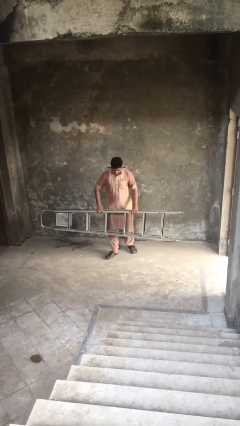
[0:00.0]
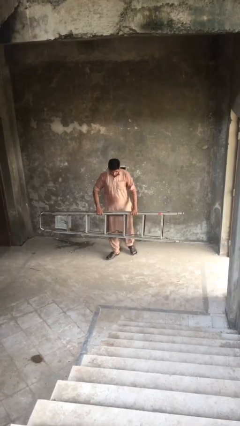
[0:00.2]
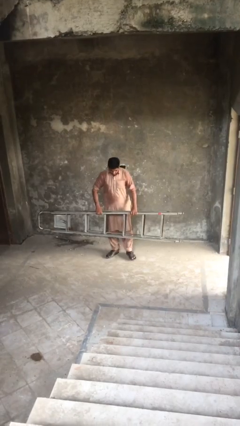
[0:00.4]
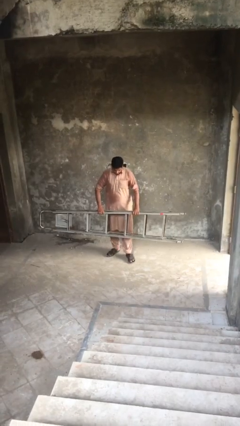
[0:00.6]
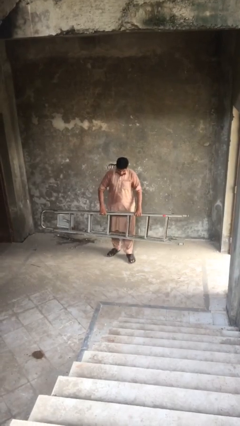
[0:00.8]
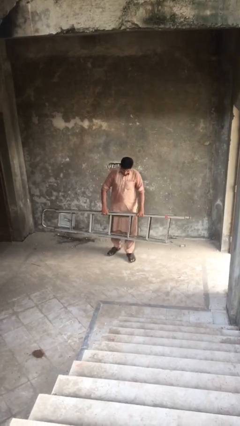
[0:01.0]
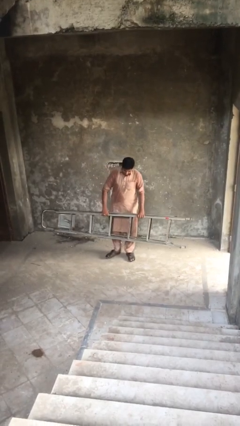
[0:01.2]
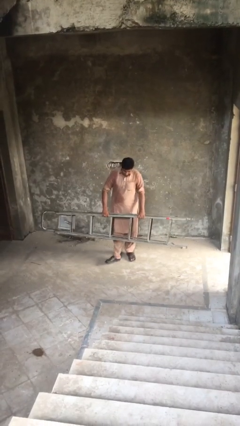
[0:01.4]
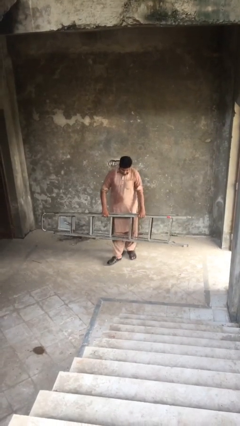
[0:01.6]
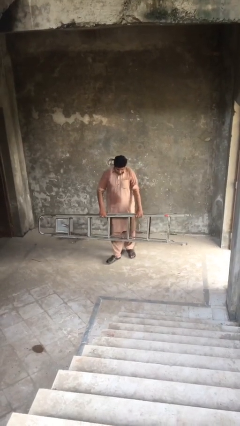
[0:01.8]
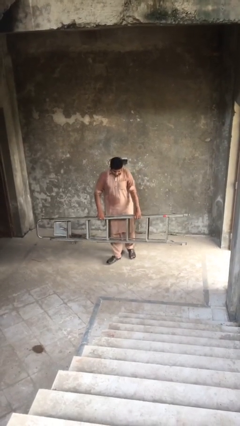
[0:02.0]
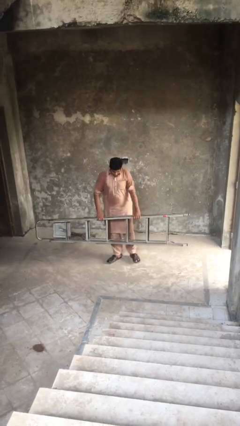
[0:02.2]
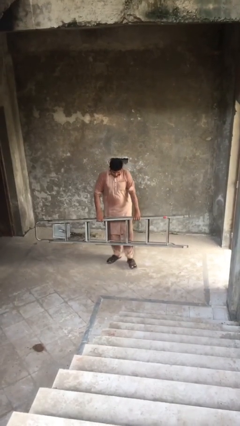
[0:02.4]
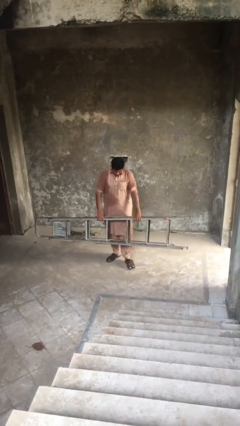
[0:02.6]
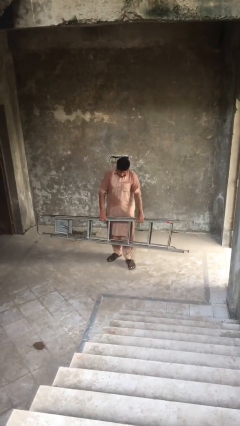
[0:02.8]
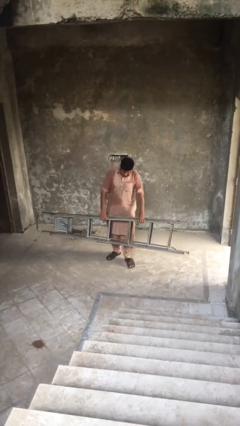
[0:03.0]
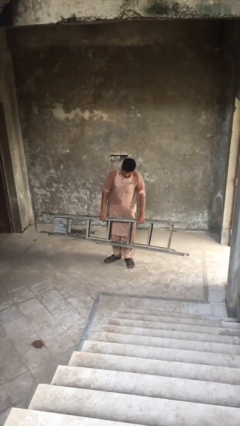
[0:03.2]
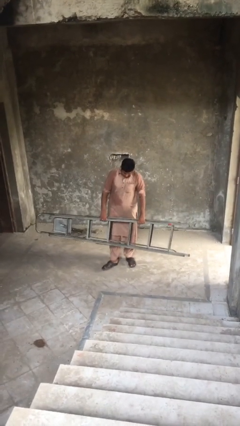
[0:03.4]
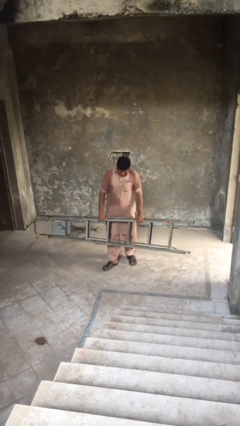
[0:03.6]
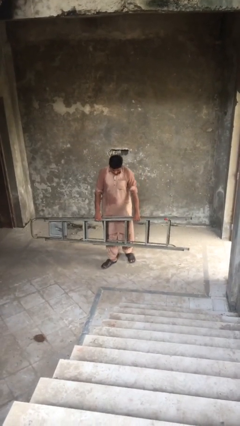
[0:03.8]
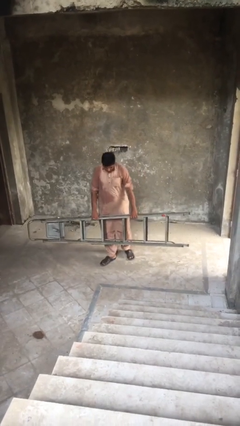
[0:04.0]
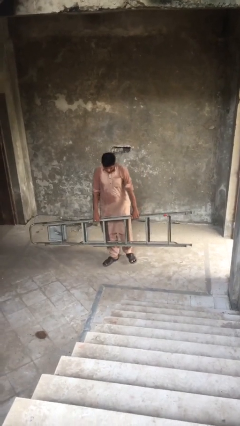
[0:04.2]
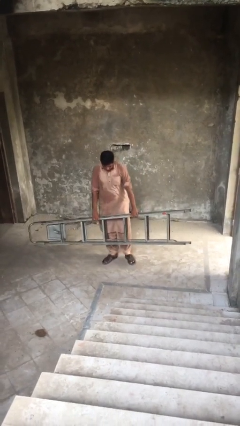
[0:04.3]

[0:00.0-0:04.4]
person carries heavy object

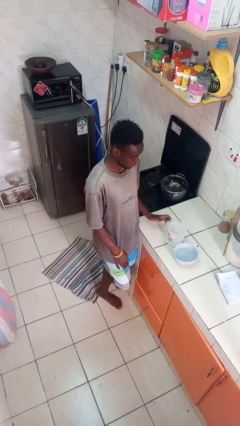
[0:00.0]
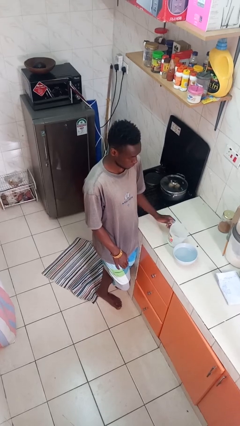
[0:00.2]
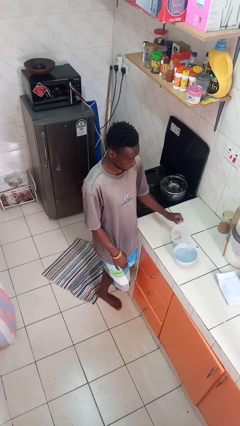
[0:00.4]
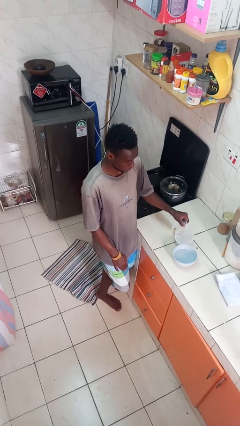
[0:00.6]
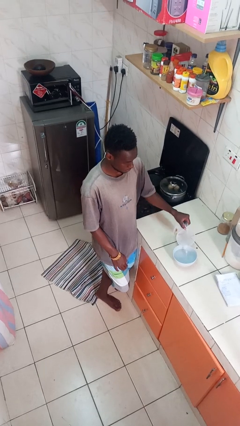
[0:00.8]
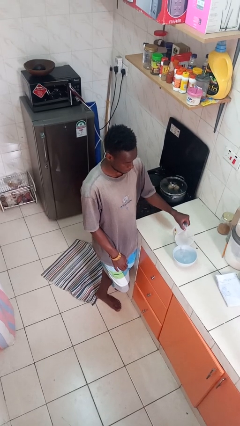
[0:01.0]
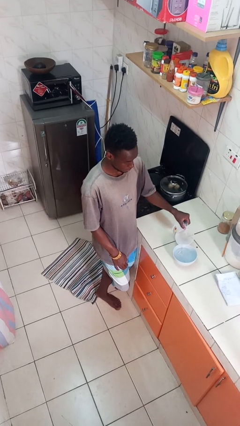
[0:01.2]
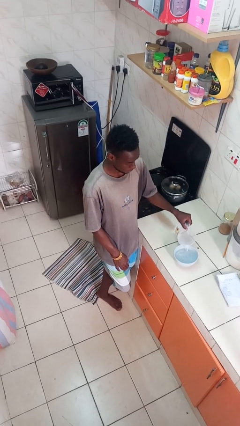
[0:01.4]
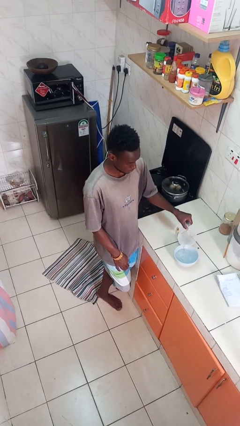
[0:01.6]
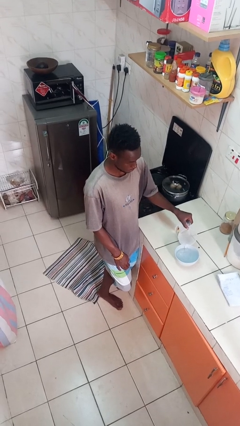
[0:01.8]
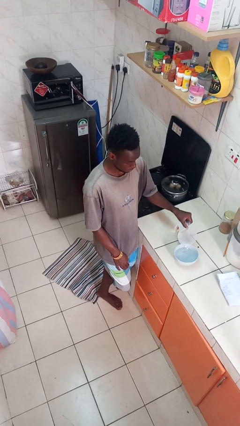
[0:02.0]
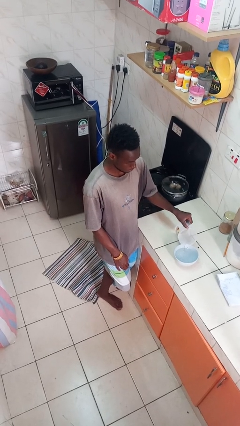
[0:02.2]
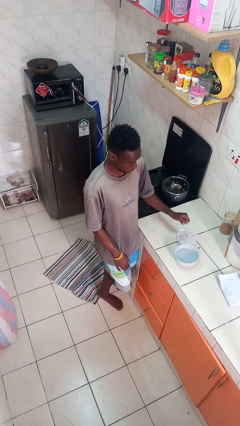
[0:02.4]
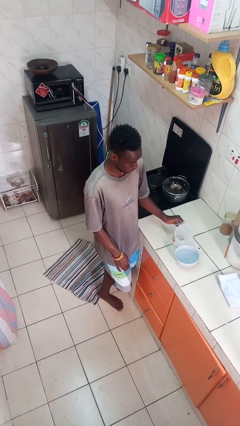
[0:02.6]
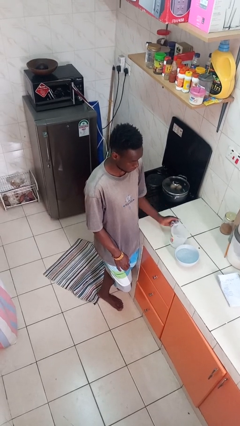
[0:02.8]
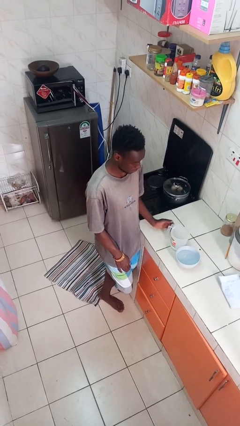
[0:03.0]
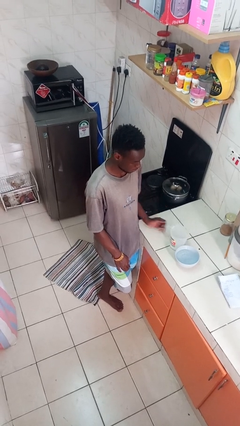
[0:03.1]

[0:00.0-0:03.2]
person pours into bowl

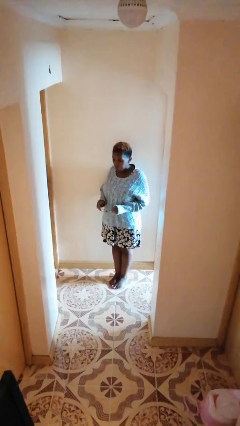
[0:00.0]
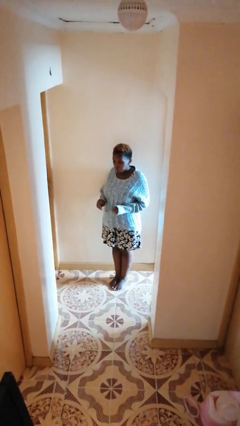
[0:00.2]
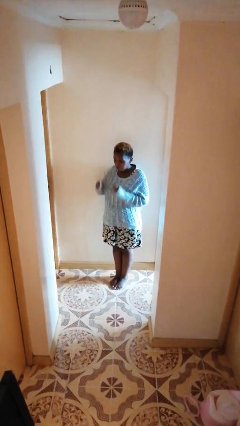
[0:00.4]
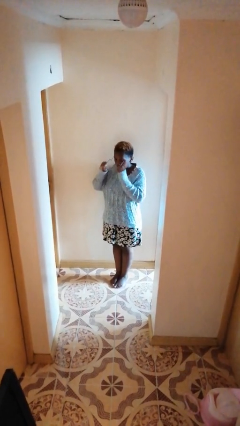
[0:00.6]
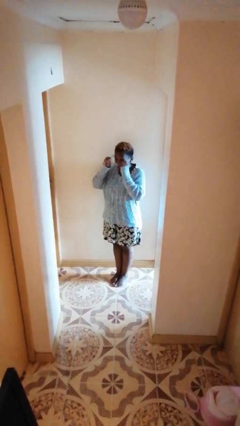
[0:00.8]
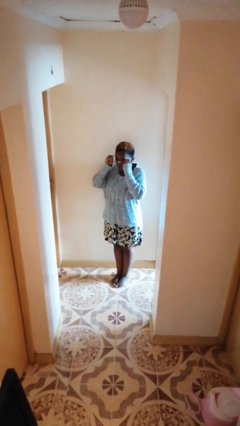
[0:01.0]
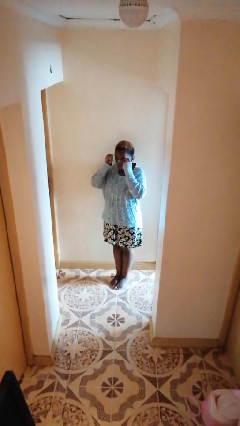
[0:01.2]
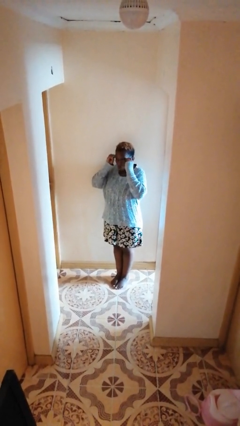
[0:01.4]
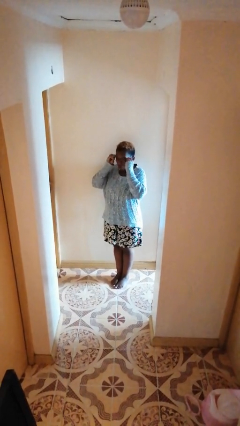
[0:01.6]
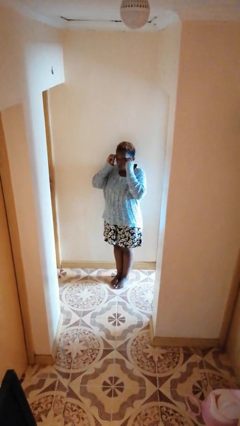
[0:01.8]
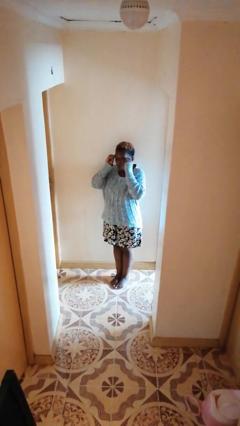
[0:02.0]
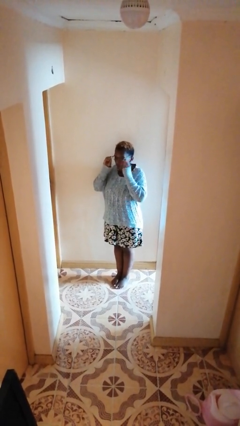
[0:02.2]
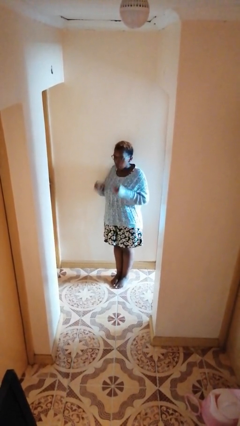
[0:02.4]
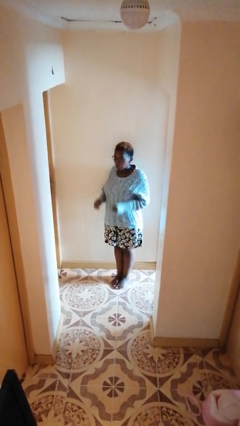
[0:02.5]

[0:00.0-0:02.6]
person puts on glasses

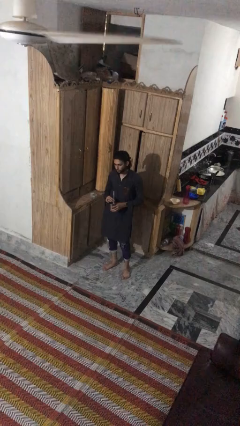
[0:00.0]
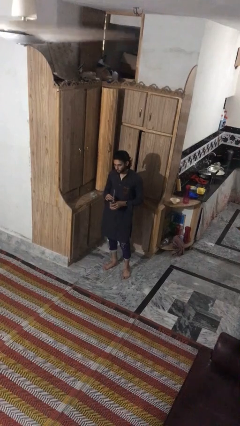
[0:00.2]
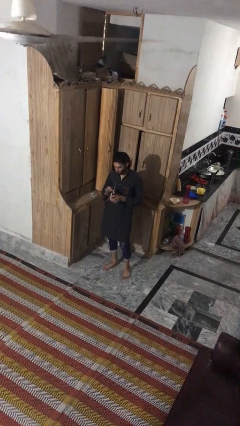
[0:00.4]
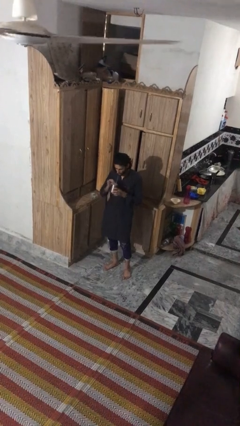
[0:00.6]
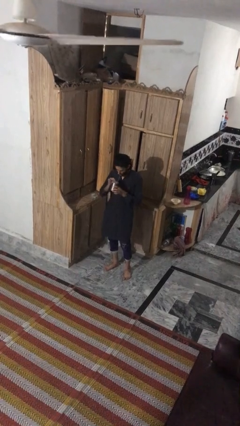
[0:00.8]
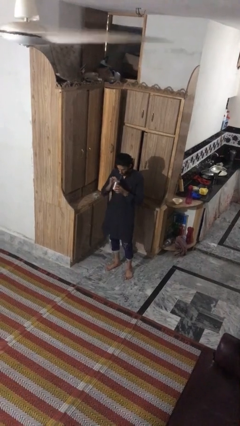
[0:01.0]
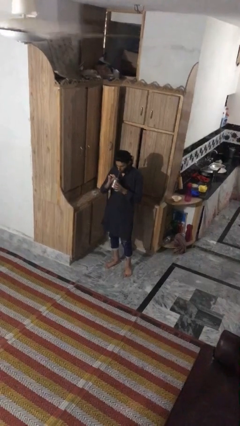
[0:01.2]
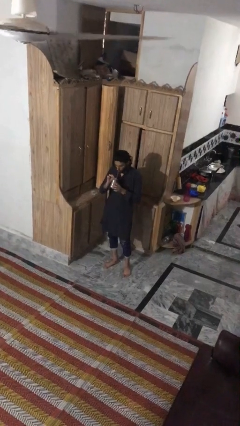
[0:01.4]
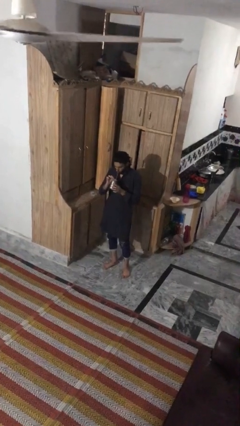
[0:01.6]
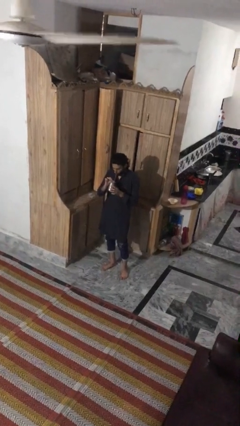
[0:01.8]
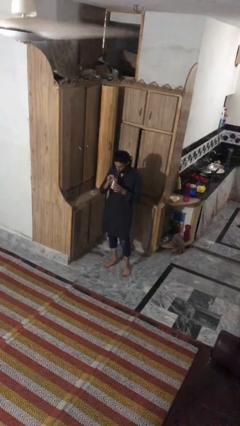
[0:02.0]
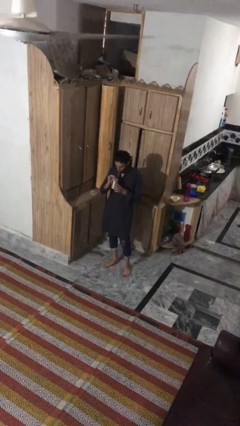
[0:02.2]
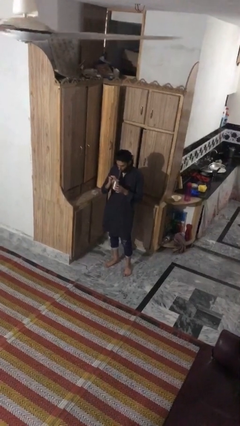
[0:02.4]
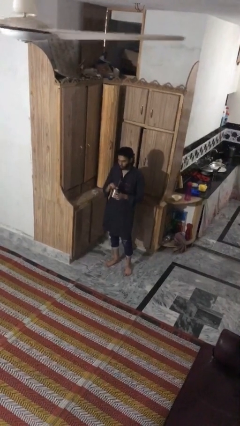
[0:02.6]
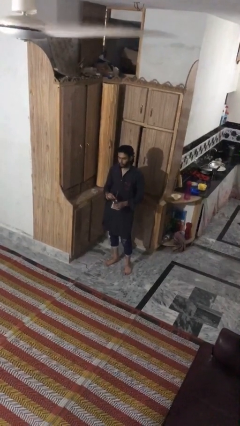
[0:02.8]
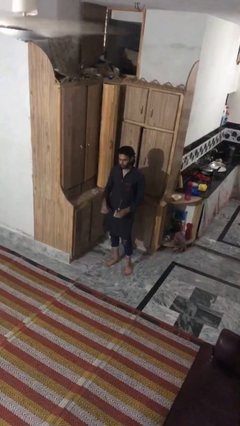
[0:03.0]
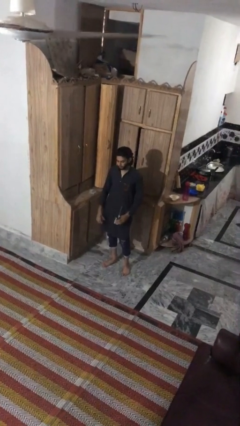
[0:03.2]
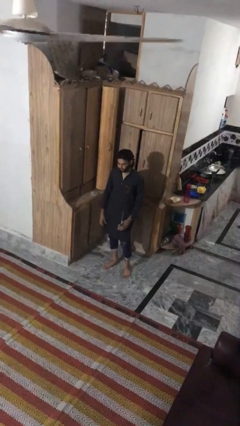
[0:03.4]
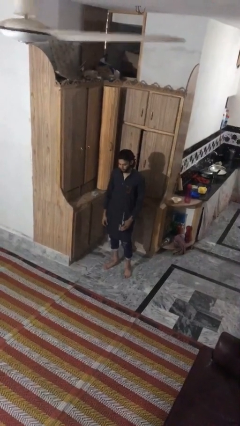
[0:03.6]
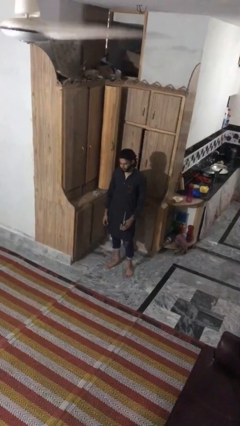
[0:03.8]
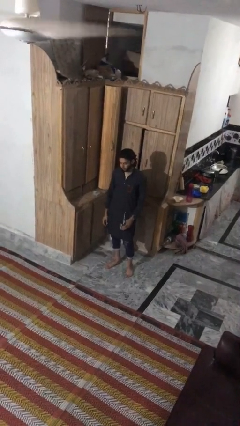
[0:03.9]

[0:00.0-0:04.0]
person drinks from straw

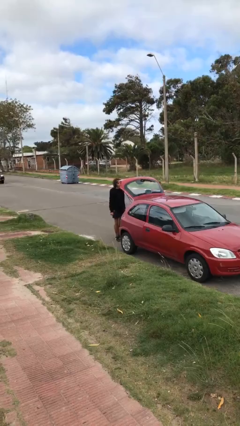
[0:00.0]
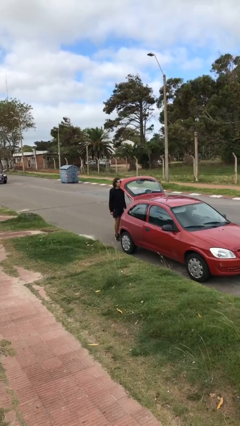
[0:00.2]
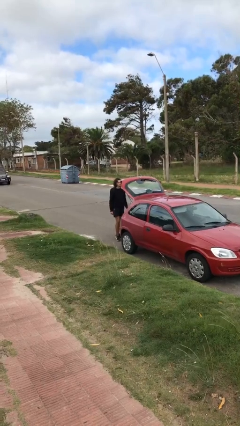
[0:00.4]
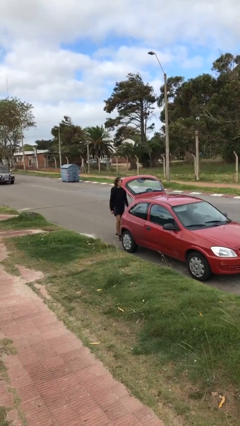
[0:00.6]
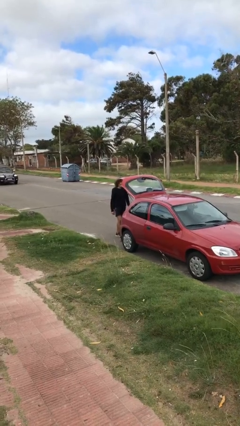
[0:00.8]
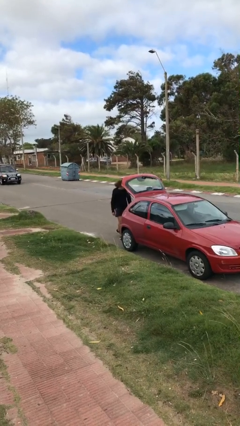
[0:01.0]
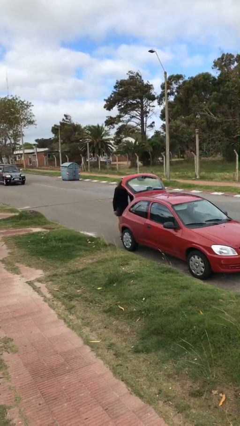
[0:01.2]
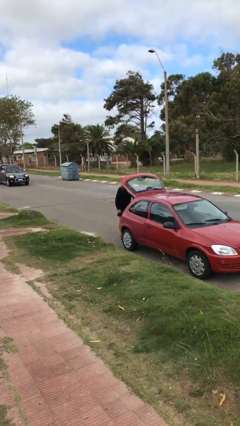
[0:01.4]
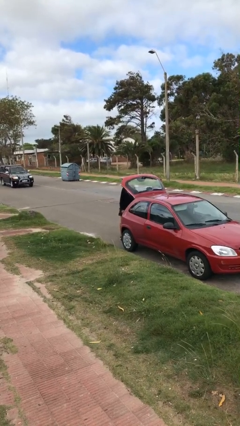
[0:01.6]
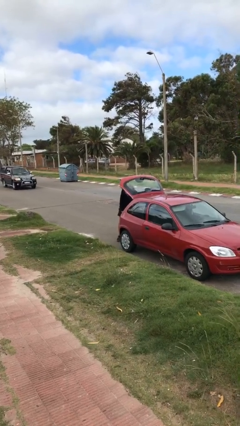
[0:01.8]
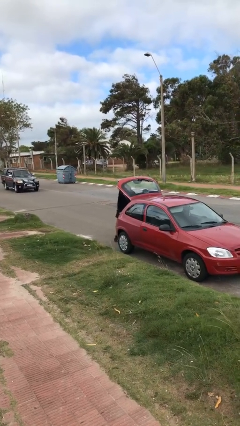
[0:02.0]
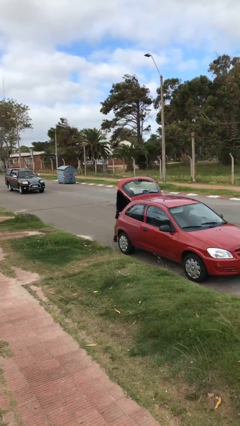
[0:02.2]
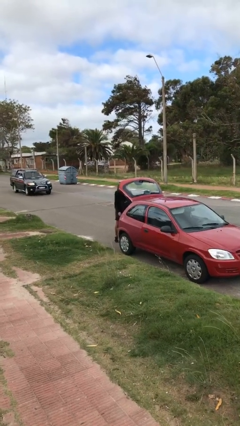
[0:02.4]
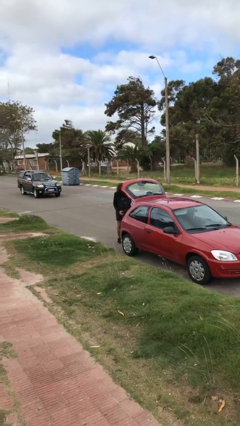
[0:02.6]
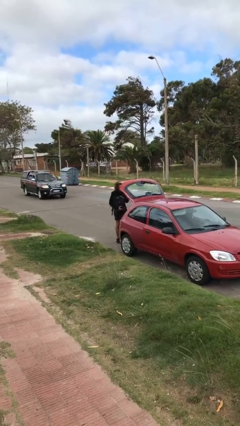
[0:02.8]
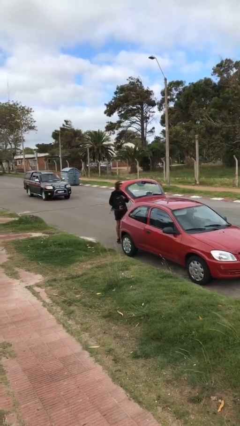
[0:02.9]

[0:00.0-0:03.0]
person unloads car
